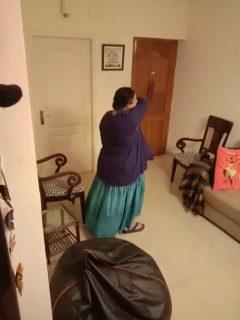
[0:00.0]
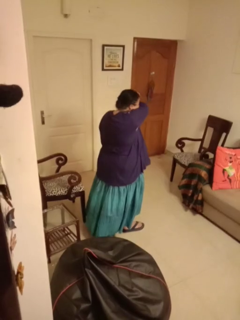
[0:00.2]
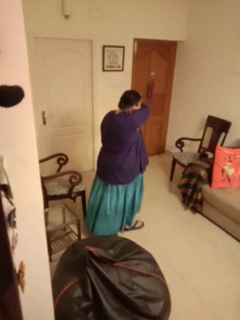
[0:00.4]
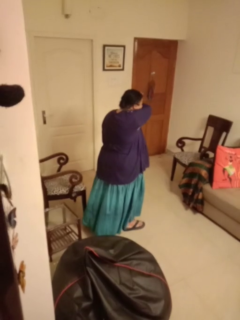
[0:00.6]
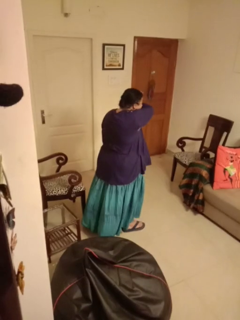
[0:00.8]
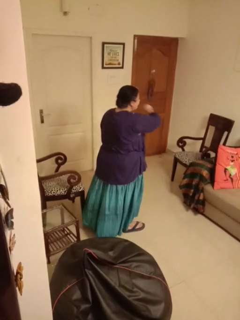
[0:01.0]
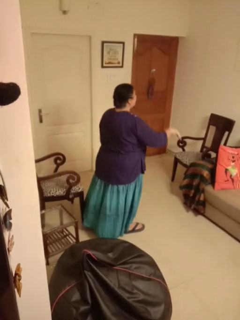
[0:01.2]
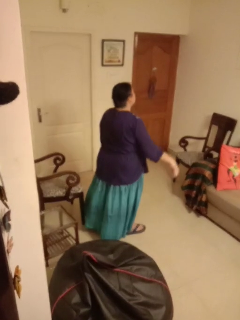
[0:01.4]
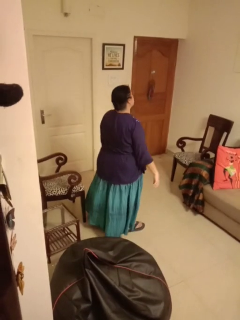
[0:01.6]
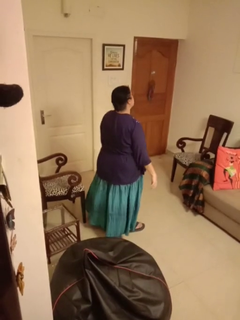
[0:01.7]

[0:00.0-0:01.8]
person sneezes into arm

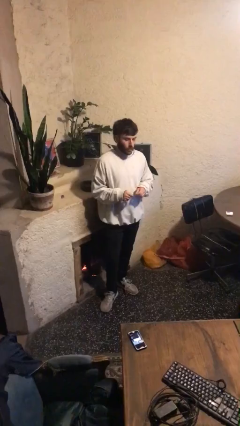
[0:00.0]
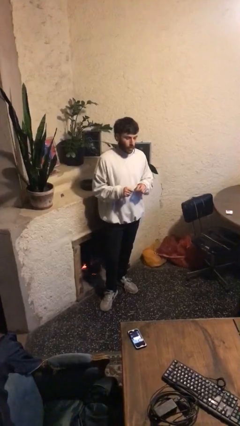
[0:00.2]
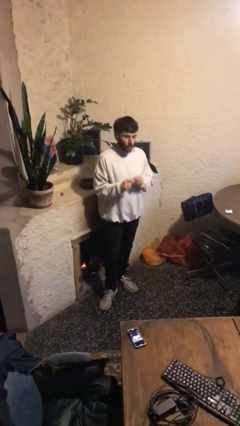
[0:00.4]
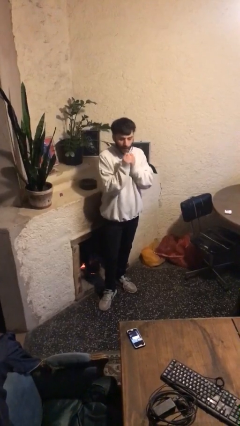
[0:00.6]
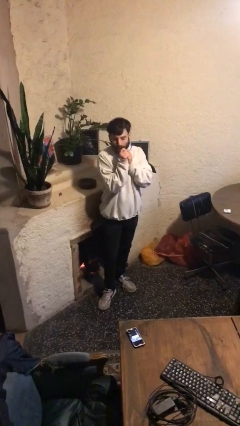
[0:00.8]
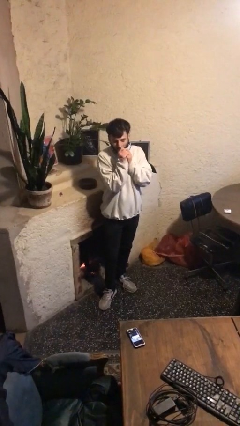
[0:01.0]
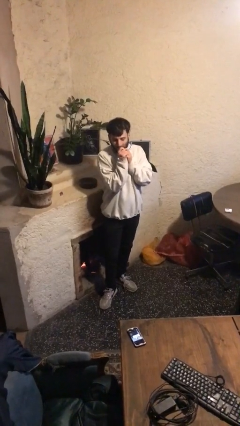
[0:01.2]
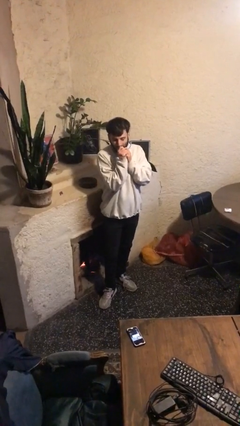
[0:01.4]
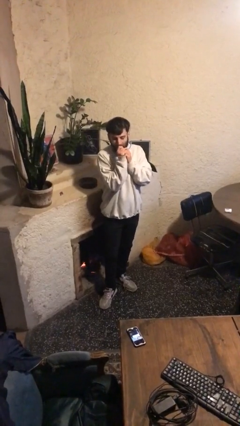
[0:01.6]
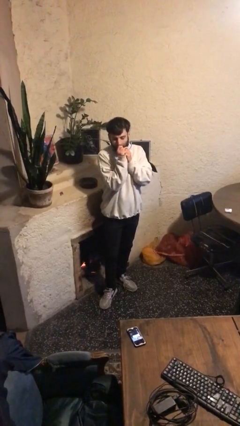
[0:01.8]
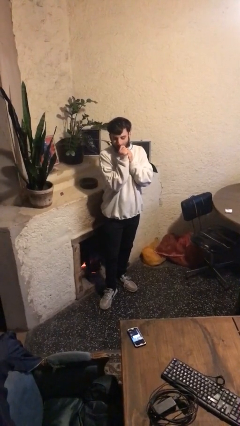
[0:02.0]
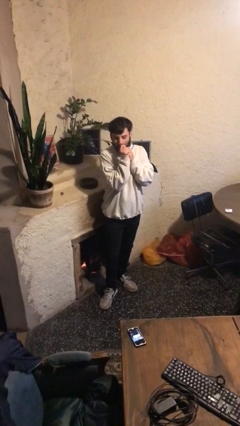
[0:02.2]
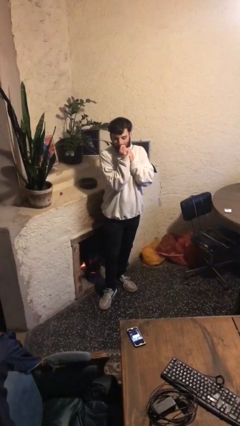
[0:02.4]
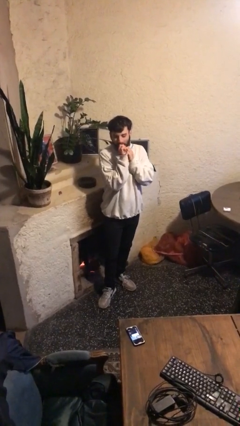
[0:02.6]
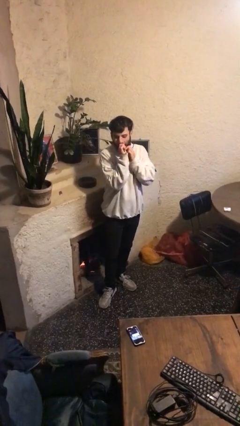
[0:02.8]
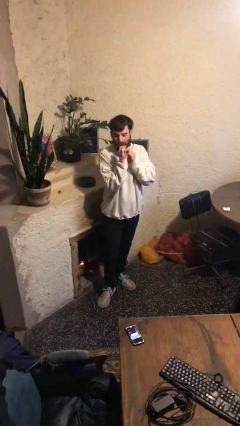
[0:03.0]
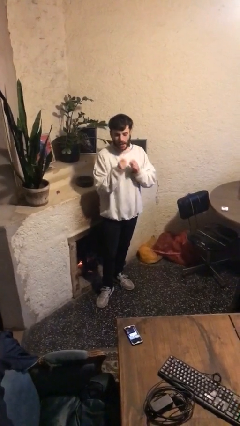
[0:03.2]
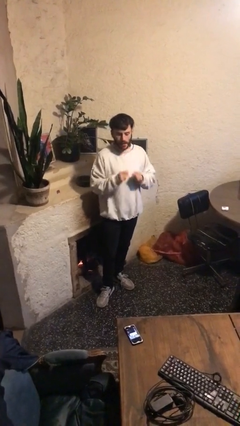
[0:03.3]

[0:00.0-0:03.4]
person flosses

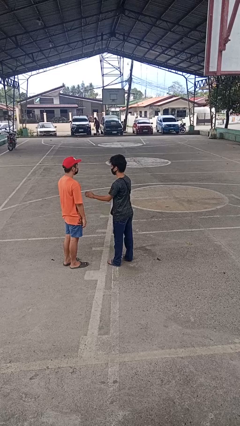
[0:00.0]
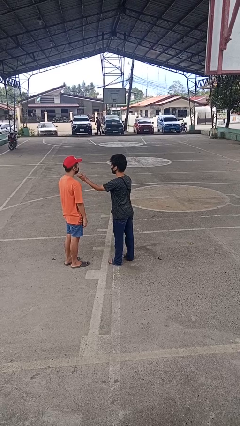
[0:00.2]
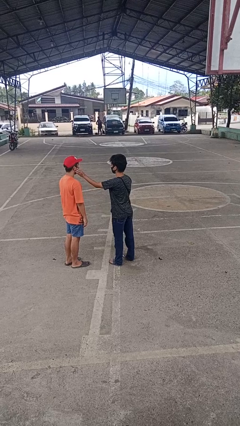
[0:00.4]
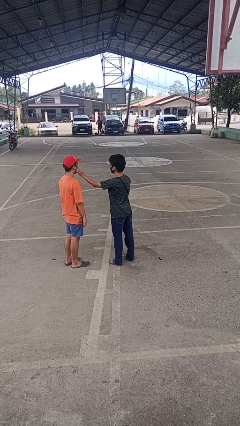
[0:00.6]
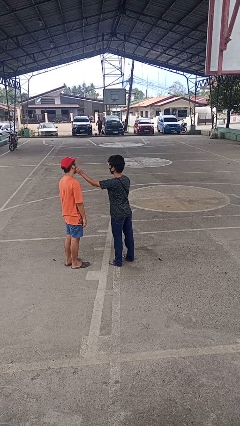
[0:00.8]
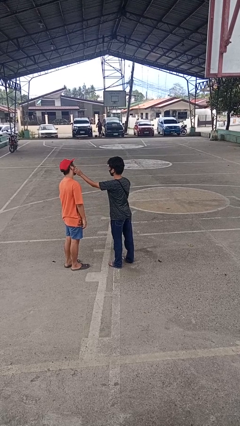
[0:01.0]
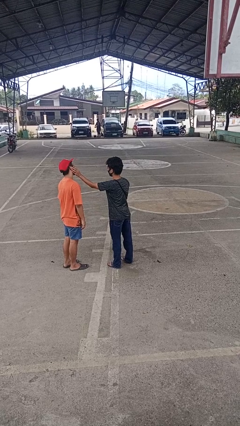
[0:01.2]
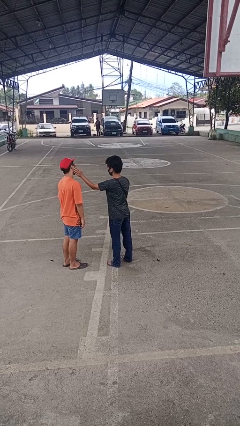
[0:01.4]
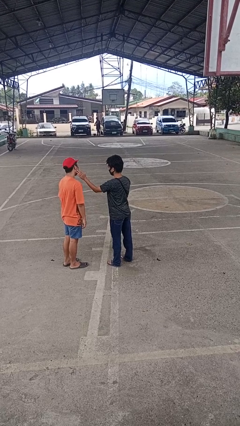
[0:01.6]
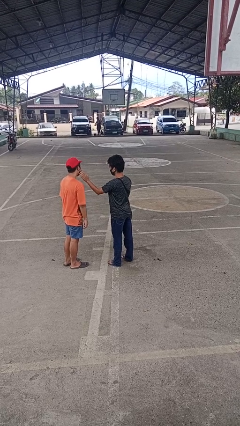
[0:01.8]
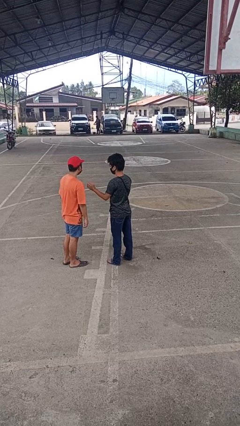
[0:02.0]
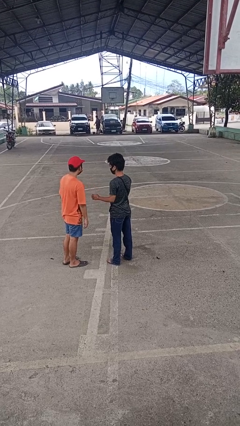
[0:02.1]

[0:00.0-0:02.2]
person touches face of person

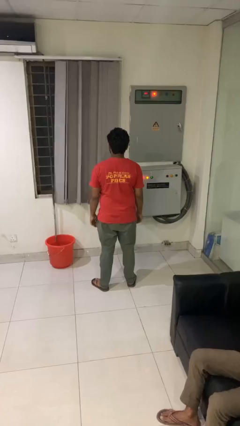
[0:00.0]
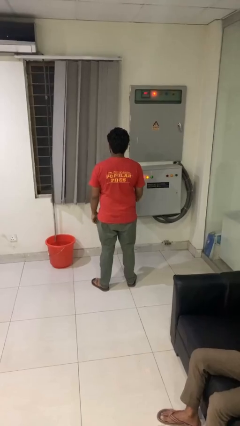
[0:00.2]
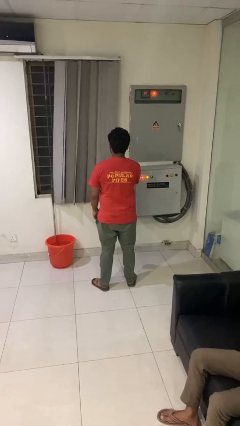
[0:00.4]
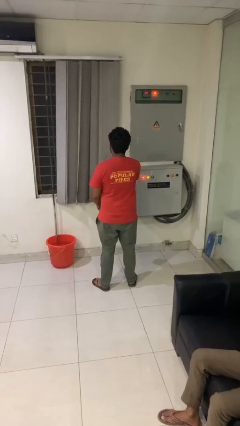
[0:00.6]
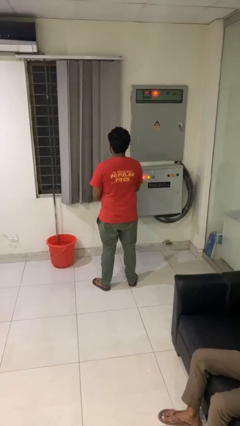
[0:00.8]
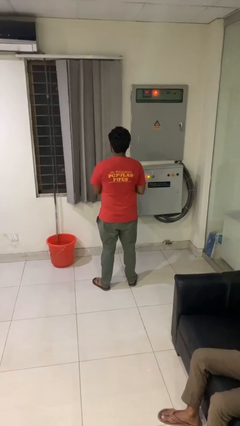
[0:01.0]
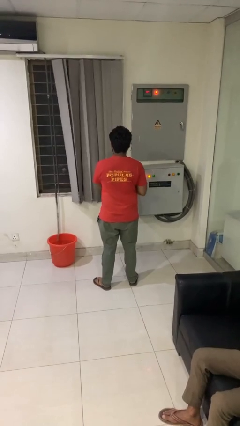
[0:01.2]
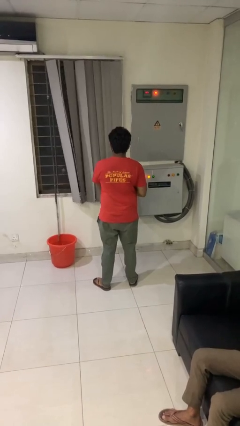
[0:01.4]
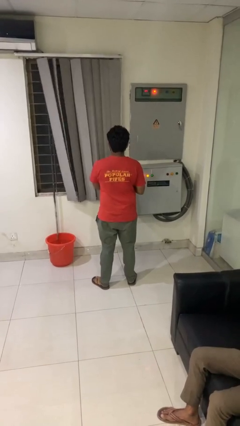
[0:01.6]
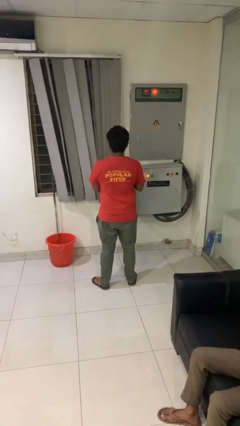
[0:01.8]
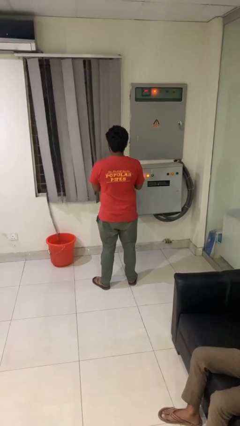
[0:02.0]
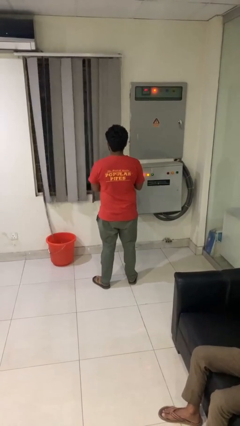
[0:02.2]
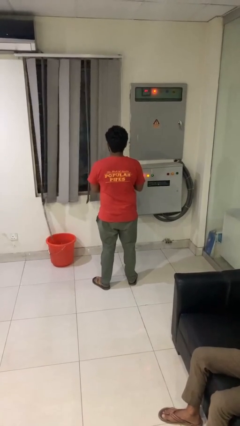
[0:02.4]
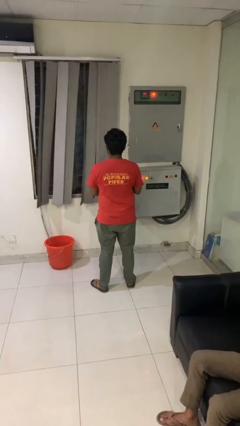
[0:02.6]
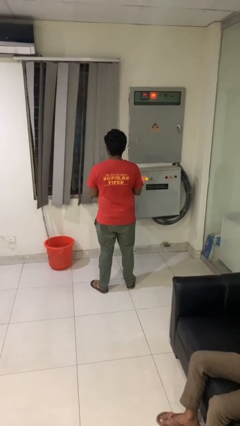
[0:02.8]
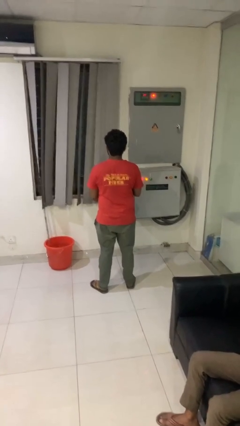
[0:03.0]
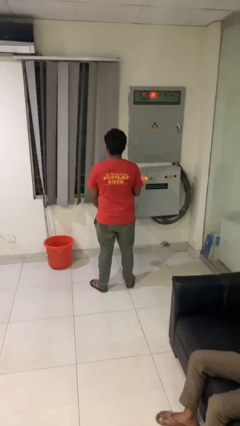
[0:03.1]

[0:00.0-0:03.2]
person closes curtains

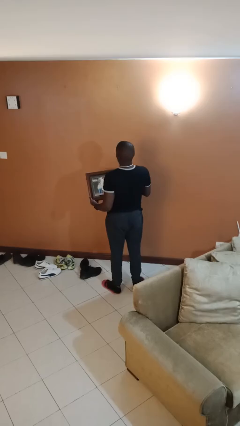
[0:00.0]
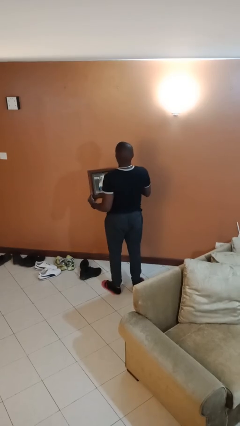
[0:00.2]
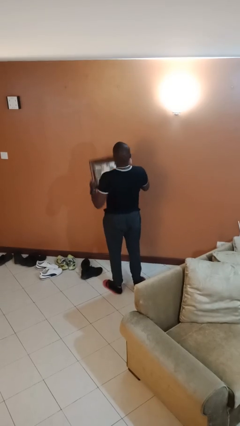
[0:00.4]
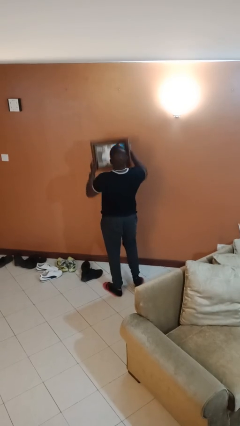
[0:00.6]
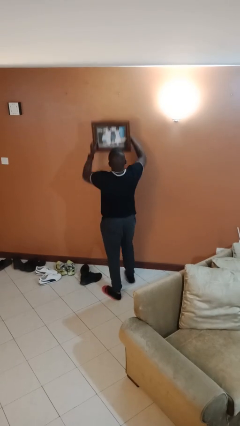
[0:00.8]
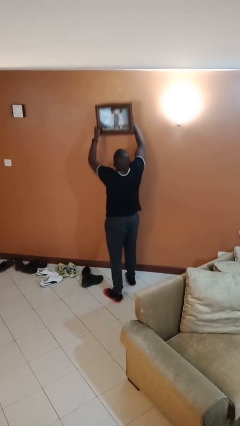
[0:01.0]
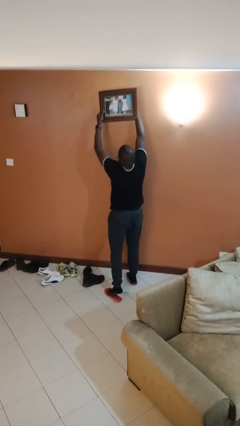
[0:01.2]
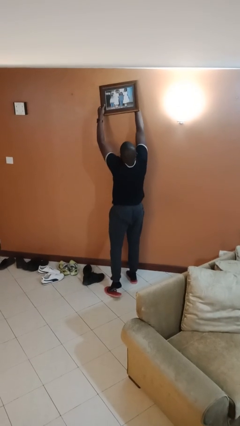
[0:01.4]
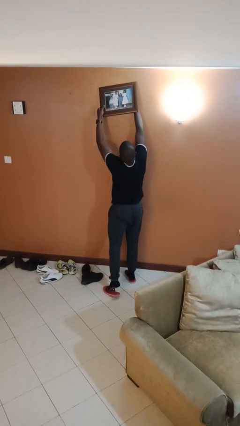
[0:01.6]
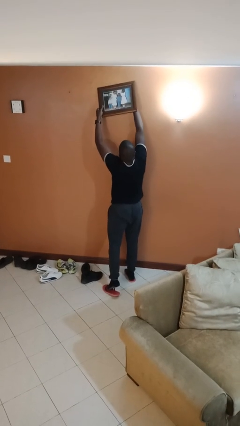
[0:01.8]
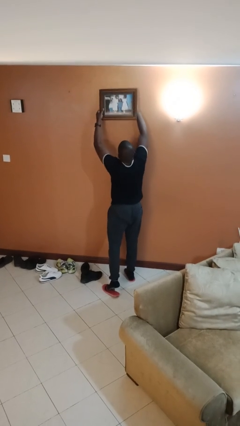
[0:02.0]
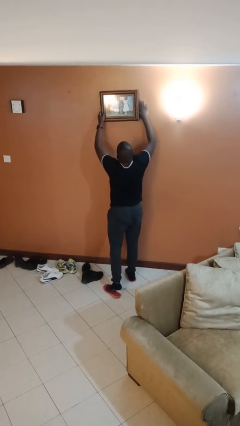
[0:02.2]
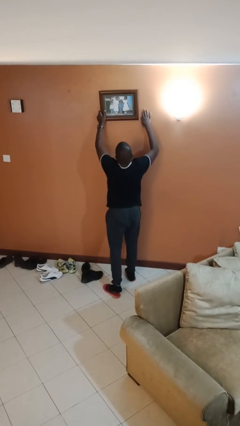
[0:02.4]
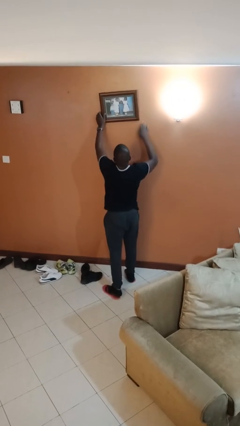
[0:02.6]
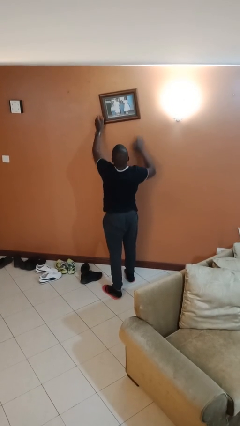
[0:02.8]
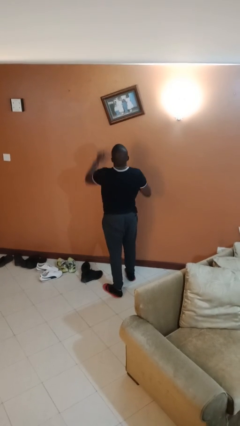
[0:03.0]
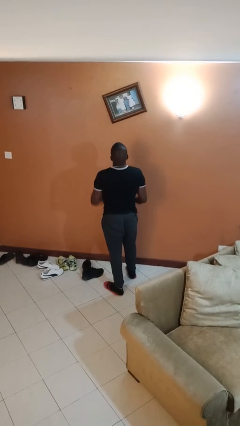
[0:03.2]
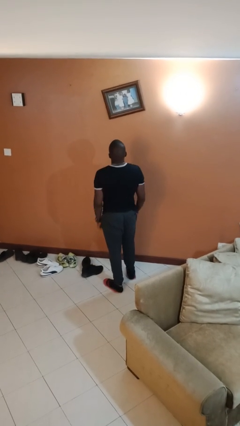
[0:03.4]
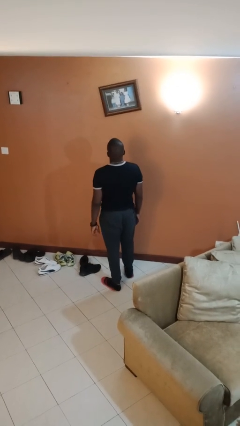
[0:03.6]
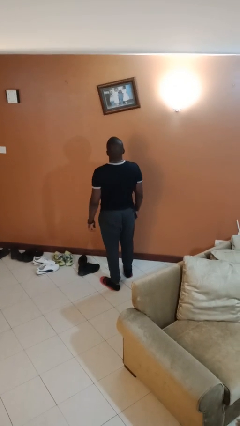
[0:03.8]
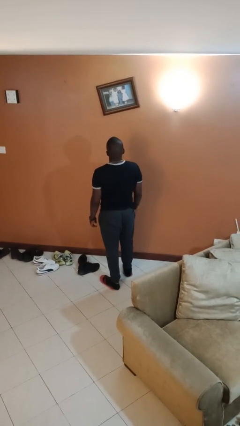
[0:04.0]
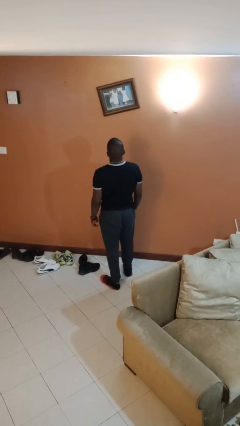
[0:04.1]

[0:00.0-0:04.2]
person puts up picture frame

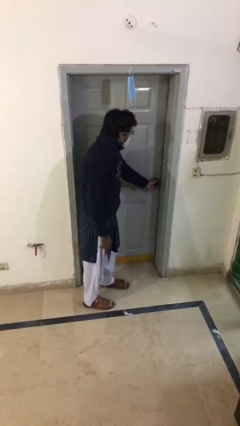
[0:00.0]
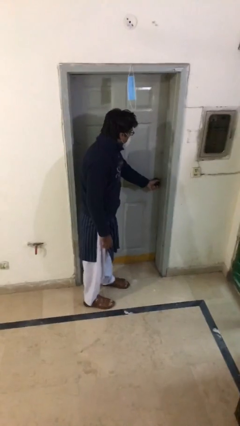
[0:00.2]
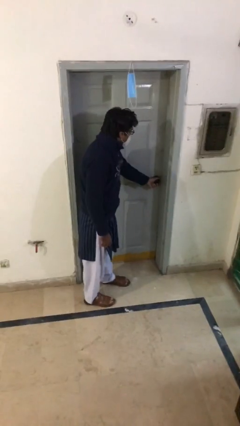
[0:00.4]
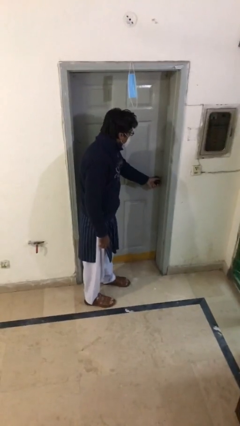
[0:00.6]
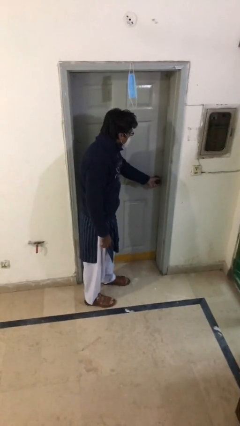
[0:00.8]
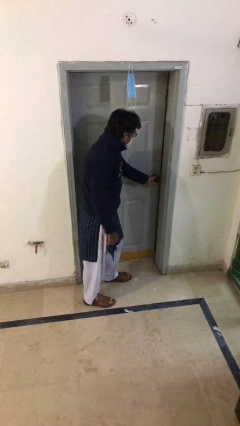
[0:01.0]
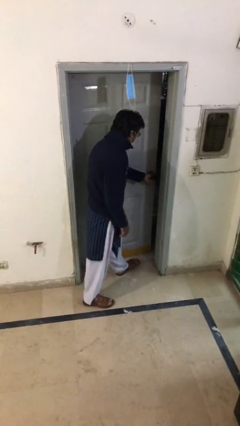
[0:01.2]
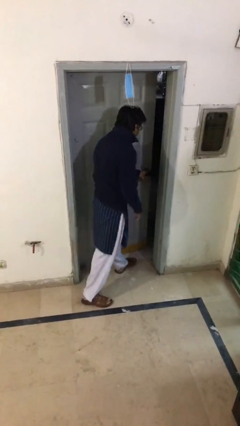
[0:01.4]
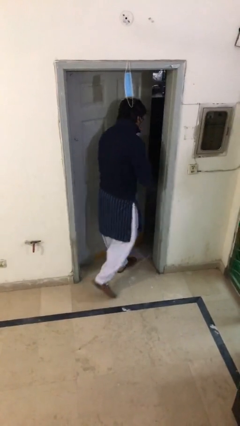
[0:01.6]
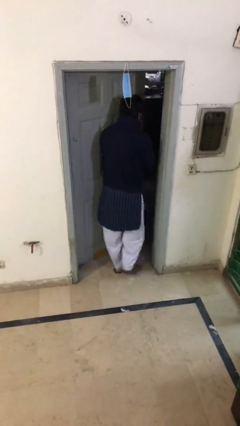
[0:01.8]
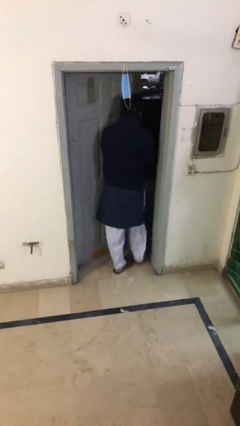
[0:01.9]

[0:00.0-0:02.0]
person opens facility door

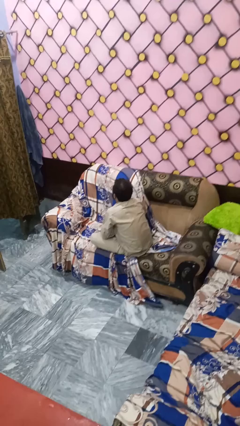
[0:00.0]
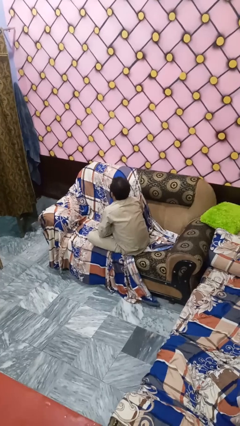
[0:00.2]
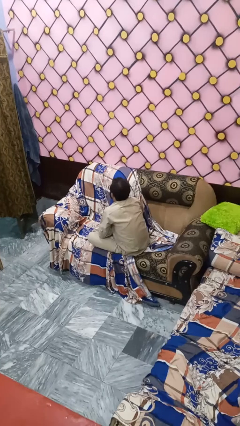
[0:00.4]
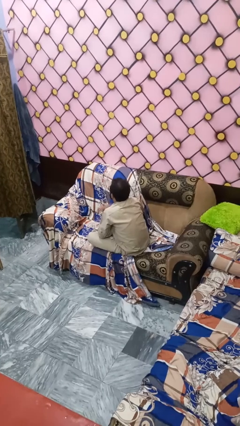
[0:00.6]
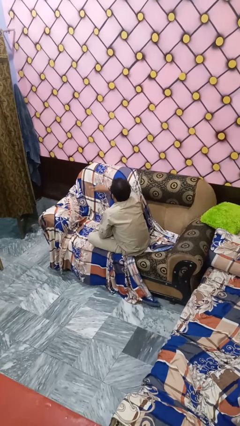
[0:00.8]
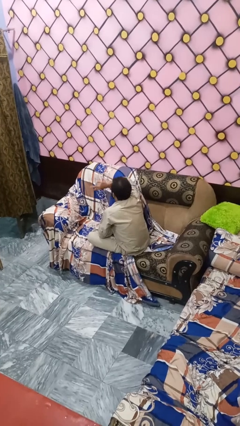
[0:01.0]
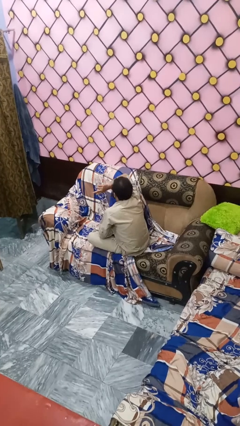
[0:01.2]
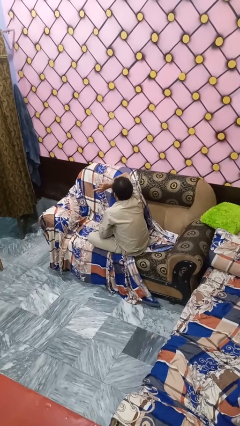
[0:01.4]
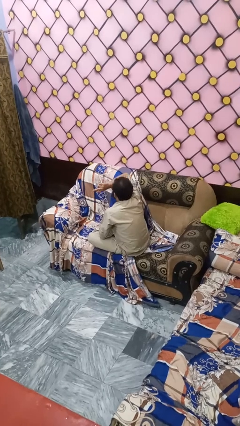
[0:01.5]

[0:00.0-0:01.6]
person gestures watch closely
